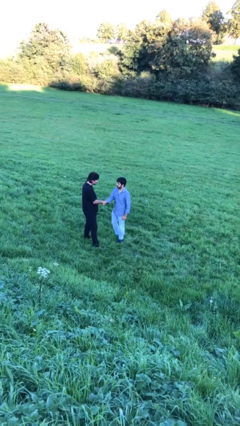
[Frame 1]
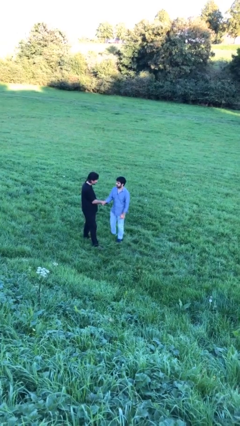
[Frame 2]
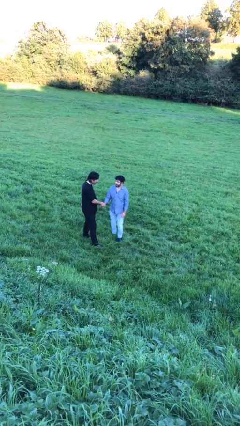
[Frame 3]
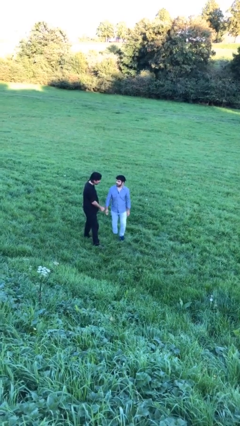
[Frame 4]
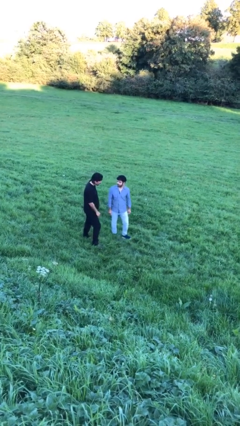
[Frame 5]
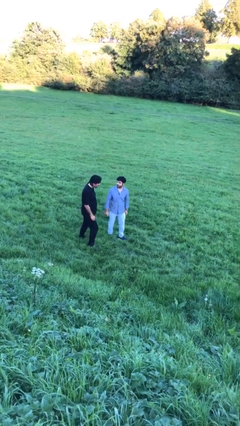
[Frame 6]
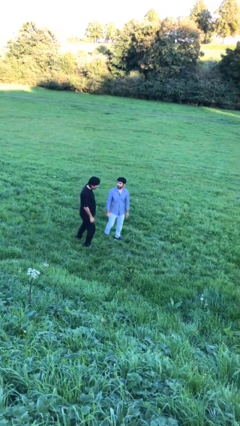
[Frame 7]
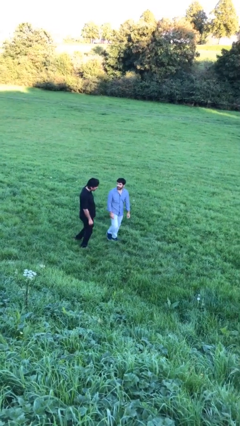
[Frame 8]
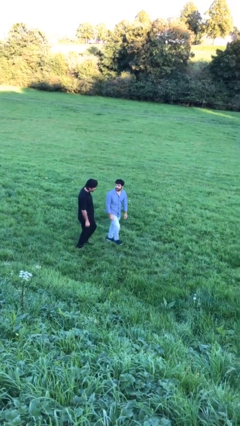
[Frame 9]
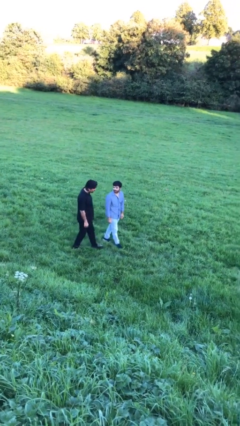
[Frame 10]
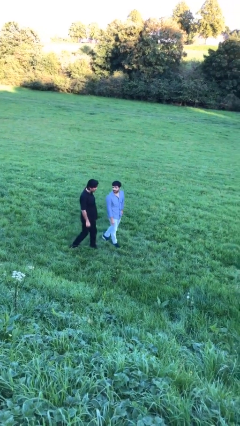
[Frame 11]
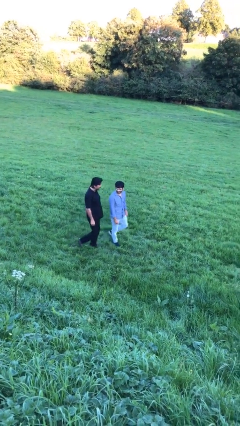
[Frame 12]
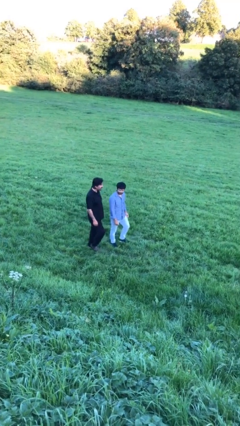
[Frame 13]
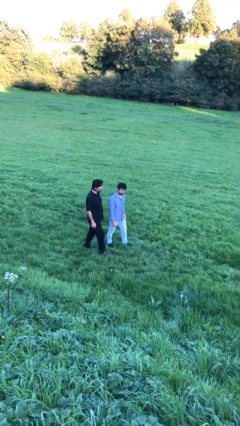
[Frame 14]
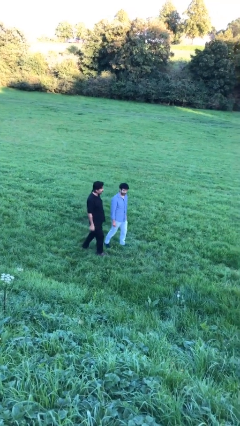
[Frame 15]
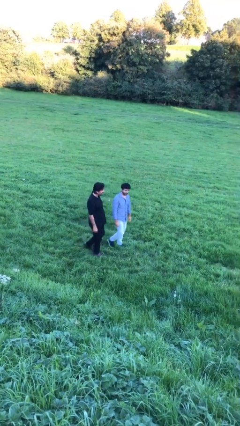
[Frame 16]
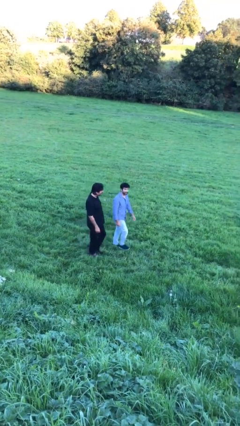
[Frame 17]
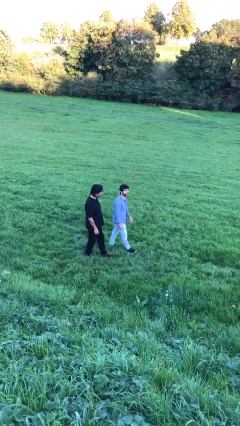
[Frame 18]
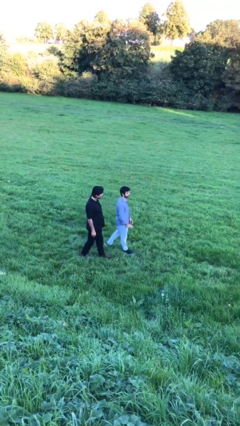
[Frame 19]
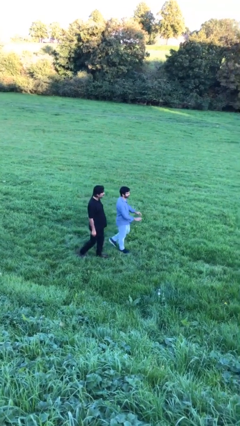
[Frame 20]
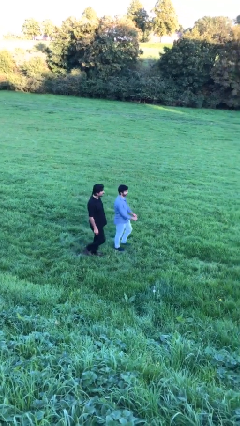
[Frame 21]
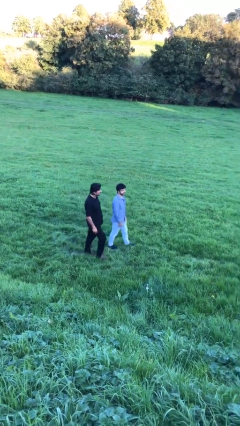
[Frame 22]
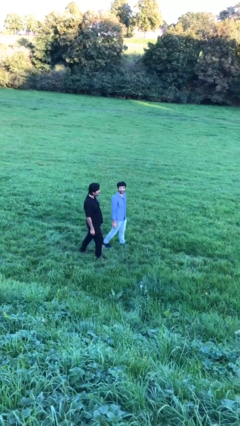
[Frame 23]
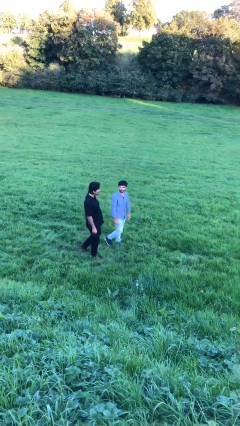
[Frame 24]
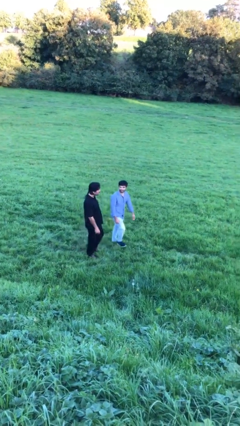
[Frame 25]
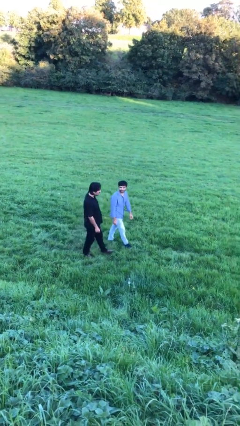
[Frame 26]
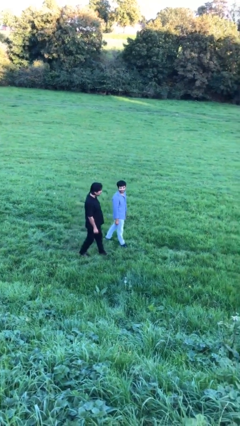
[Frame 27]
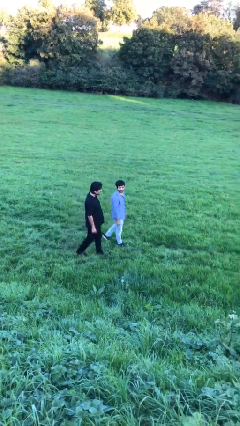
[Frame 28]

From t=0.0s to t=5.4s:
person talks to person

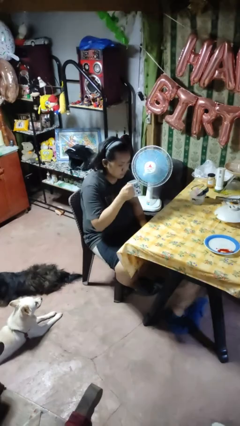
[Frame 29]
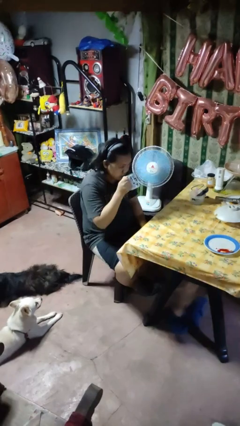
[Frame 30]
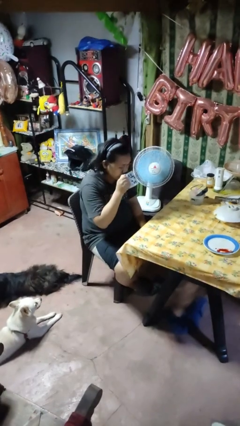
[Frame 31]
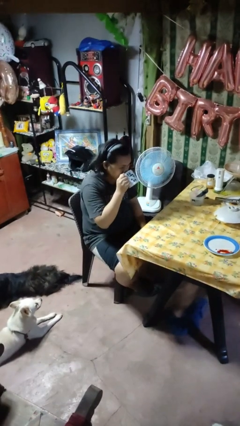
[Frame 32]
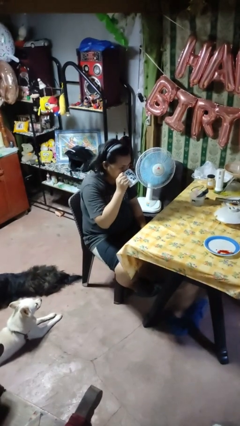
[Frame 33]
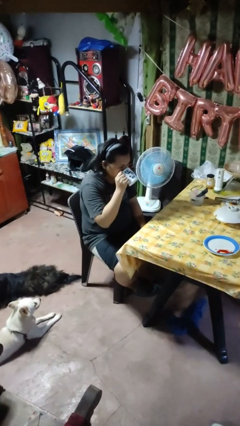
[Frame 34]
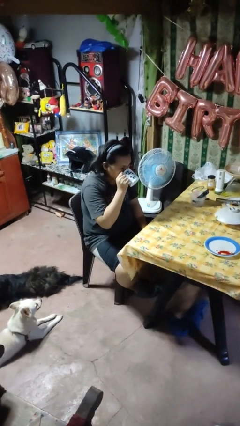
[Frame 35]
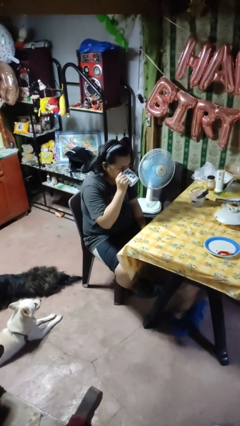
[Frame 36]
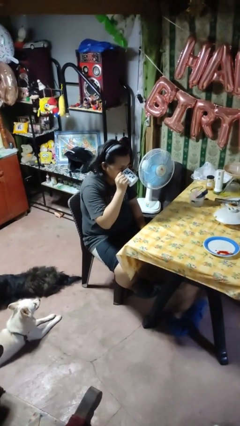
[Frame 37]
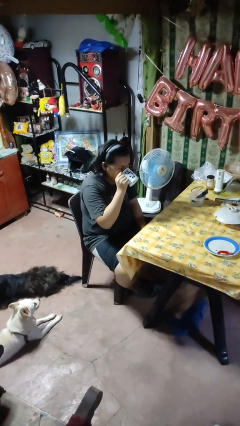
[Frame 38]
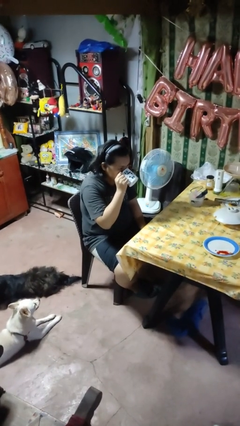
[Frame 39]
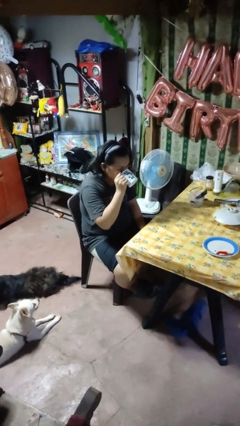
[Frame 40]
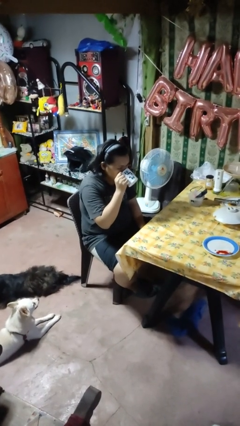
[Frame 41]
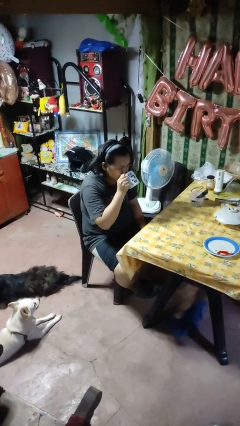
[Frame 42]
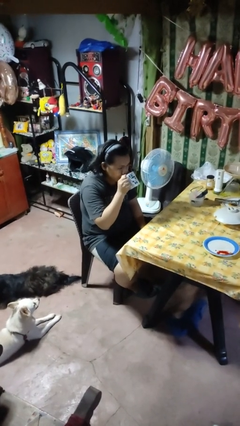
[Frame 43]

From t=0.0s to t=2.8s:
person drinks from mug

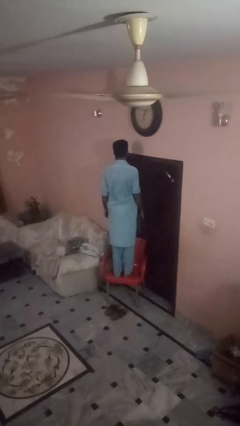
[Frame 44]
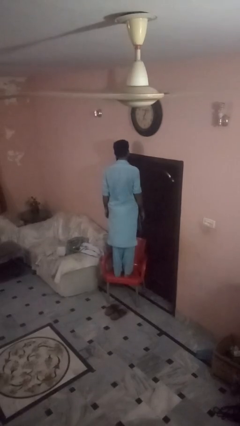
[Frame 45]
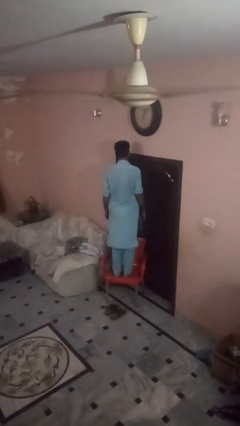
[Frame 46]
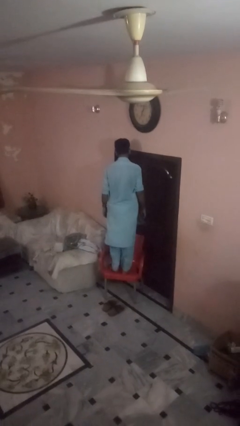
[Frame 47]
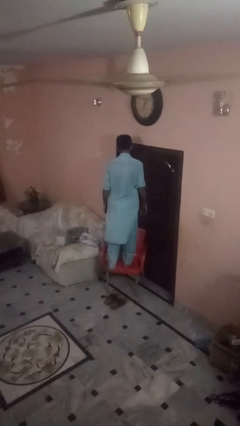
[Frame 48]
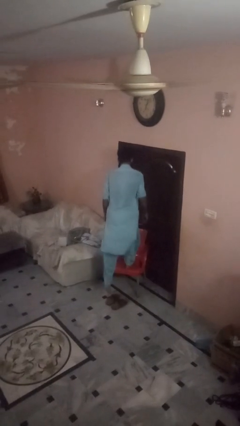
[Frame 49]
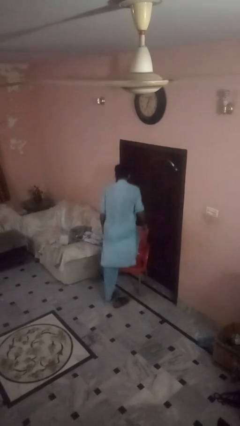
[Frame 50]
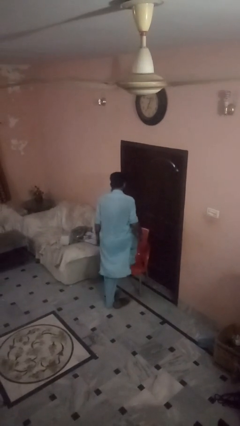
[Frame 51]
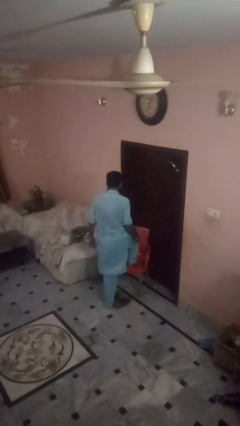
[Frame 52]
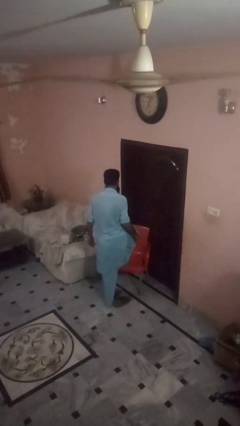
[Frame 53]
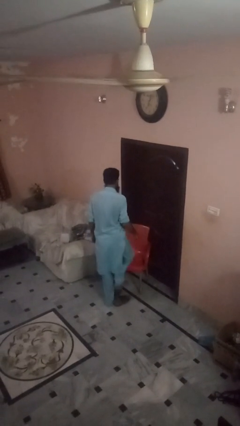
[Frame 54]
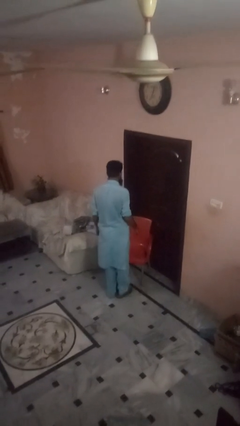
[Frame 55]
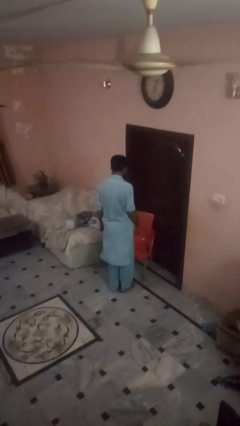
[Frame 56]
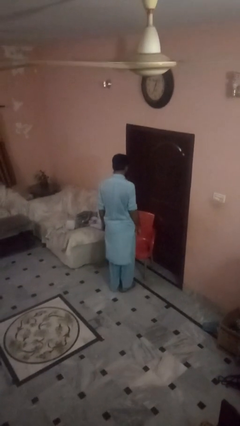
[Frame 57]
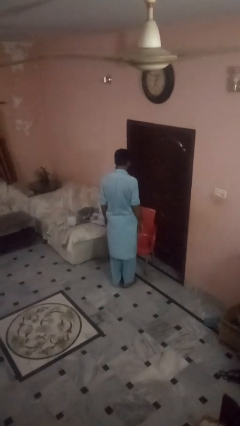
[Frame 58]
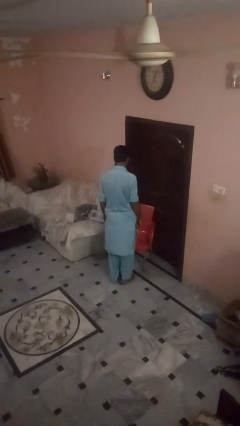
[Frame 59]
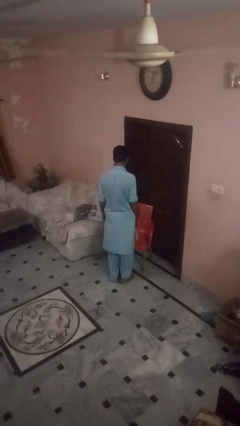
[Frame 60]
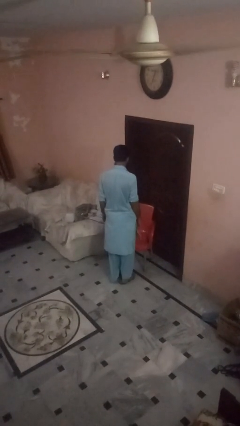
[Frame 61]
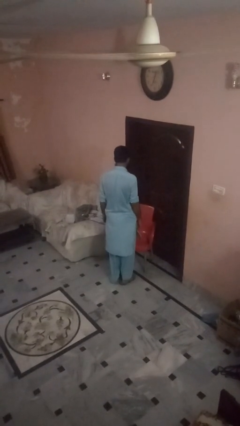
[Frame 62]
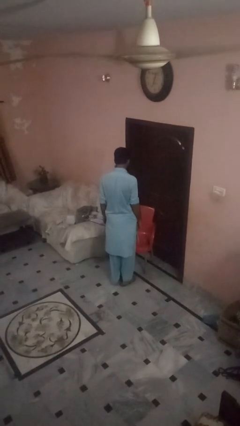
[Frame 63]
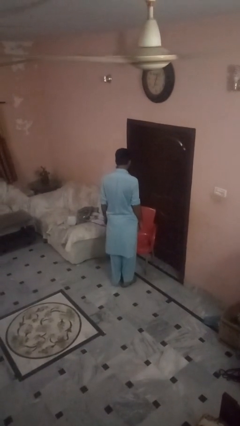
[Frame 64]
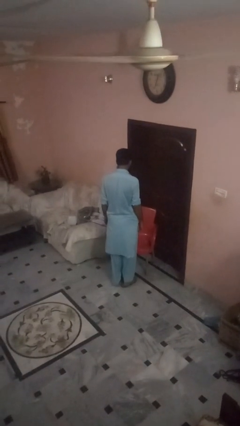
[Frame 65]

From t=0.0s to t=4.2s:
person climbs off chair

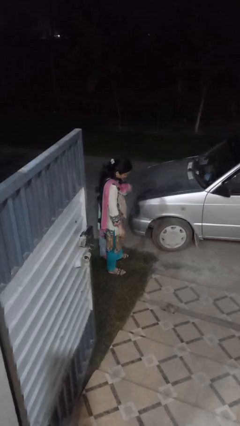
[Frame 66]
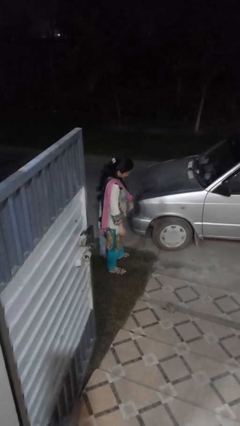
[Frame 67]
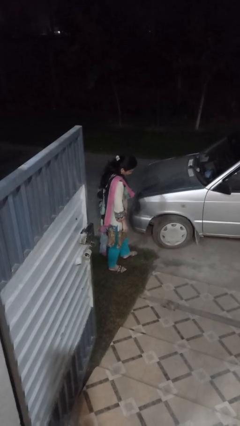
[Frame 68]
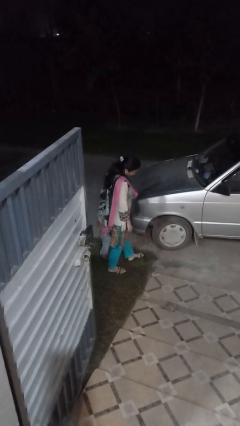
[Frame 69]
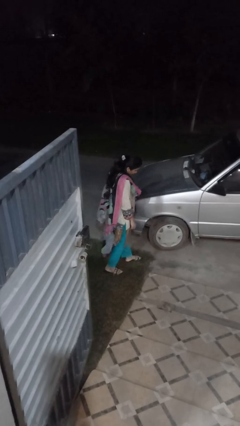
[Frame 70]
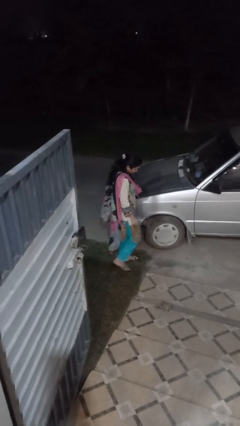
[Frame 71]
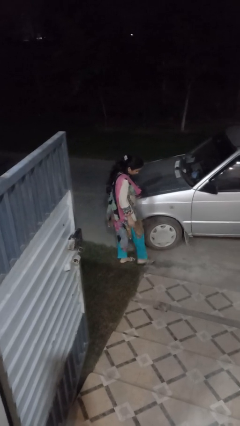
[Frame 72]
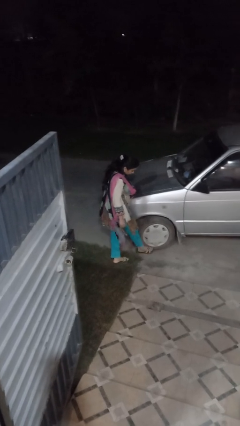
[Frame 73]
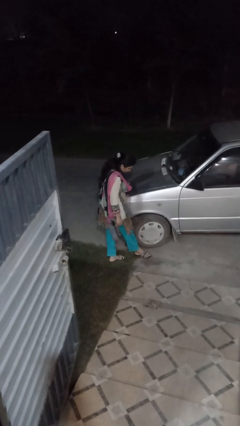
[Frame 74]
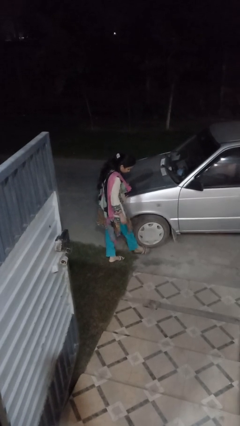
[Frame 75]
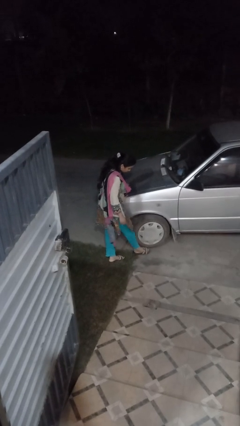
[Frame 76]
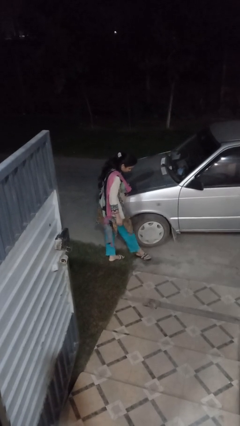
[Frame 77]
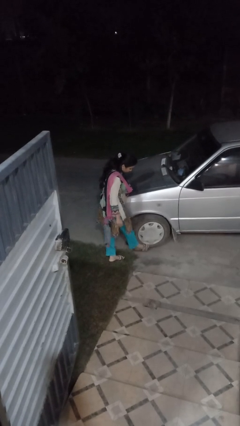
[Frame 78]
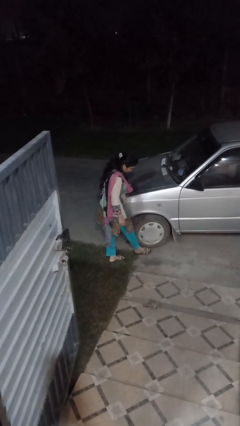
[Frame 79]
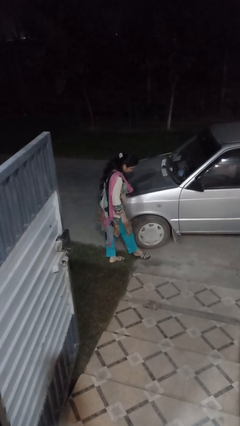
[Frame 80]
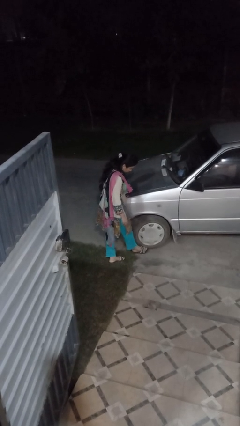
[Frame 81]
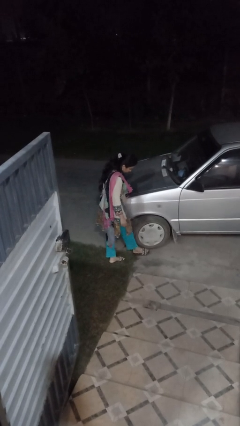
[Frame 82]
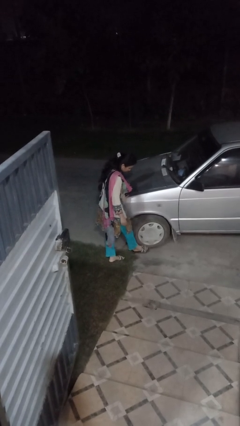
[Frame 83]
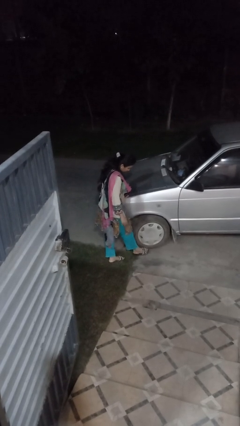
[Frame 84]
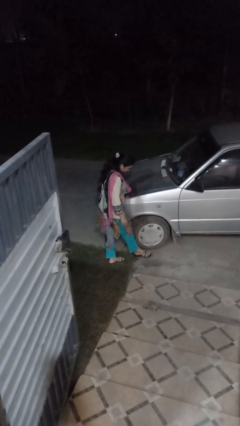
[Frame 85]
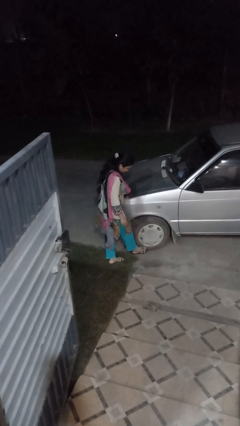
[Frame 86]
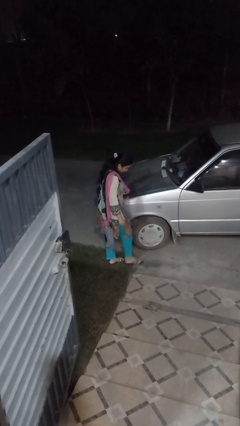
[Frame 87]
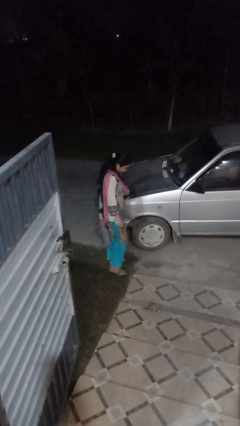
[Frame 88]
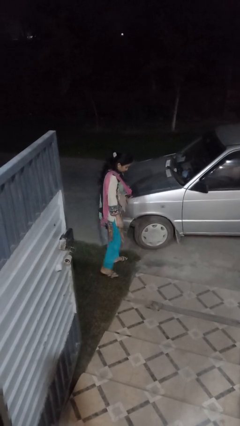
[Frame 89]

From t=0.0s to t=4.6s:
person kicks car tires

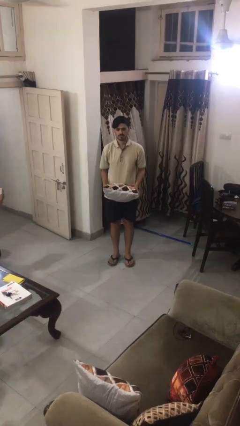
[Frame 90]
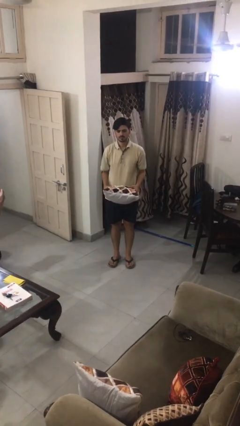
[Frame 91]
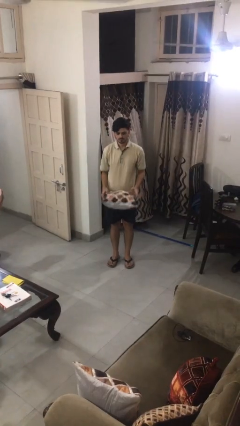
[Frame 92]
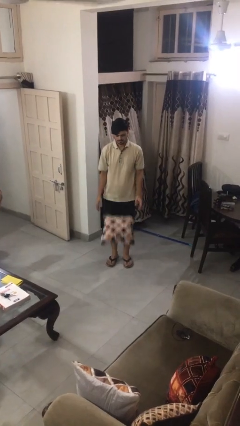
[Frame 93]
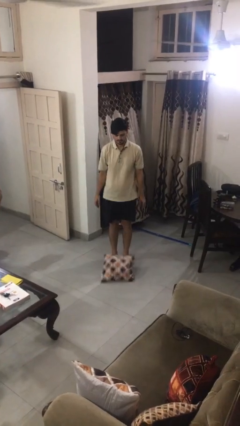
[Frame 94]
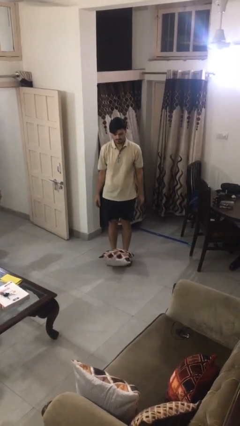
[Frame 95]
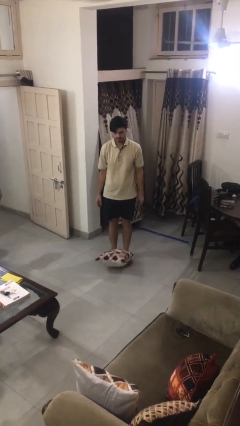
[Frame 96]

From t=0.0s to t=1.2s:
person drops object
